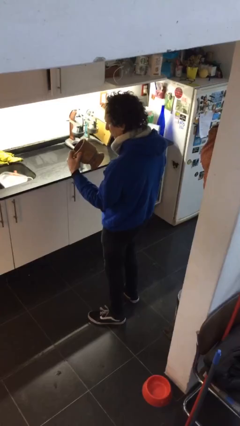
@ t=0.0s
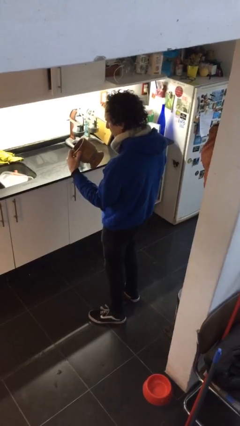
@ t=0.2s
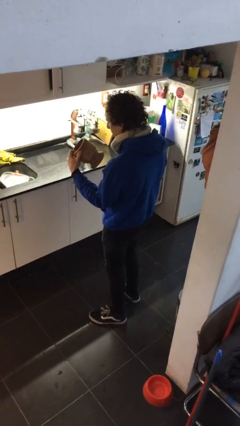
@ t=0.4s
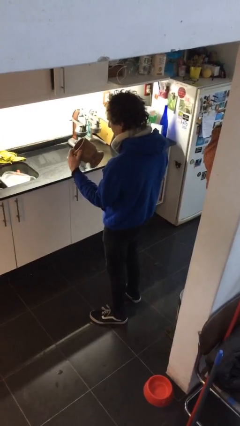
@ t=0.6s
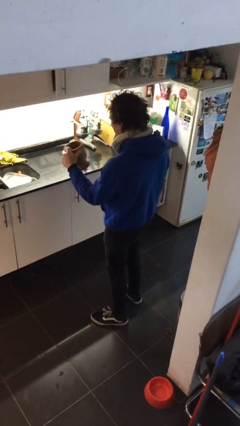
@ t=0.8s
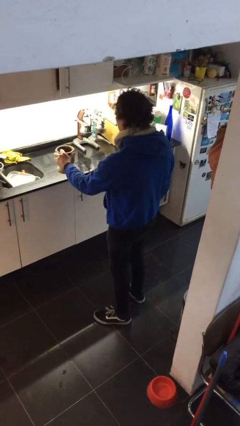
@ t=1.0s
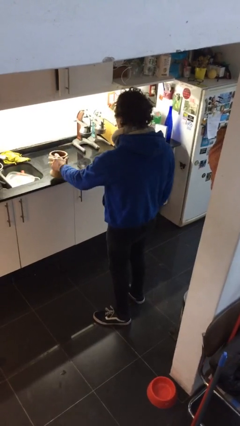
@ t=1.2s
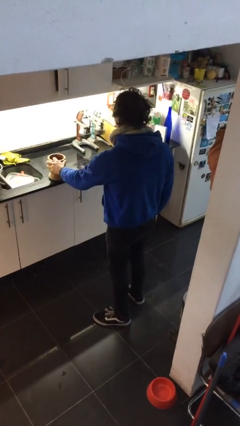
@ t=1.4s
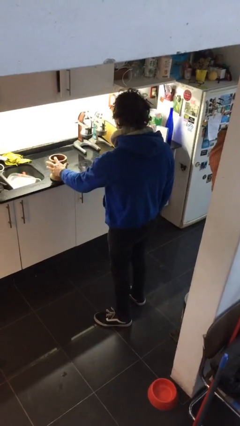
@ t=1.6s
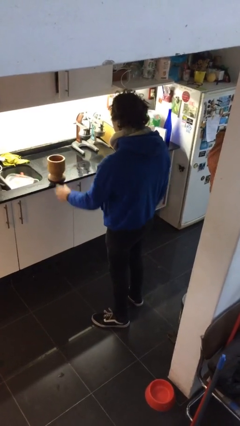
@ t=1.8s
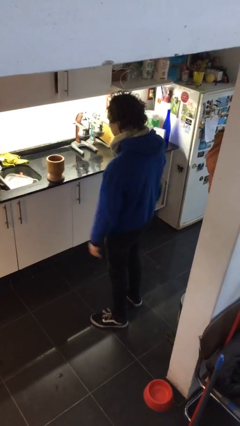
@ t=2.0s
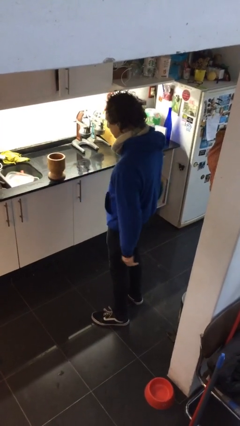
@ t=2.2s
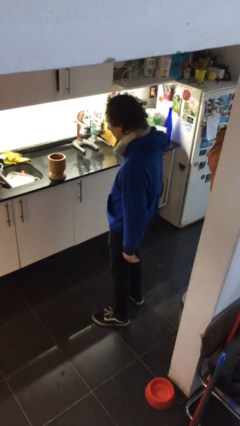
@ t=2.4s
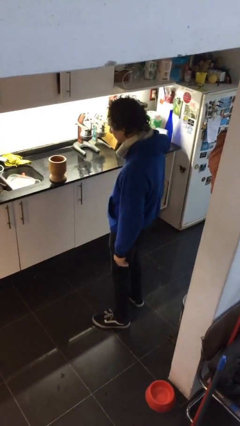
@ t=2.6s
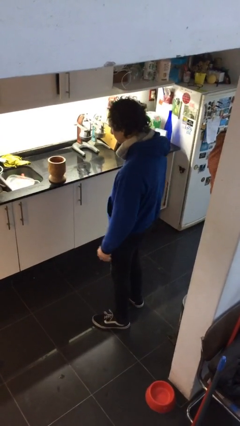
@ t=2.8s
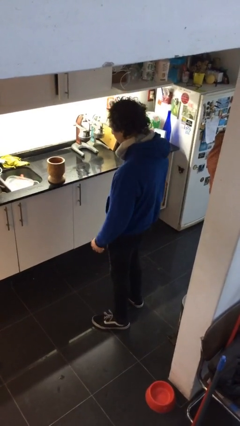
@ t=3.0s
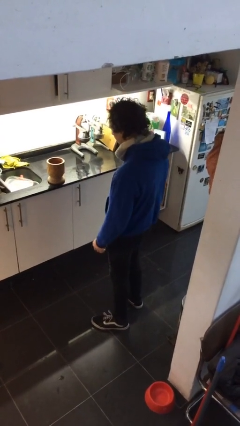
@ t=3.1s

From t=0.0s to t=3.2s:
person puts down object on countertop

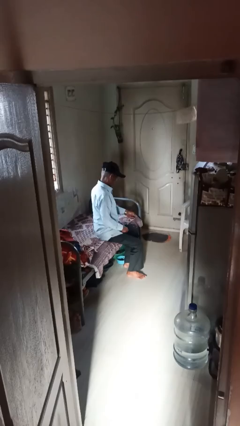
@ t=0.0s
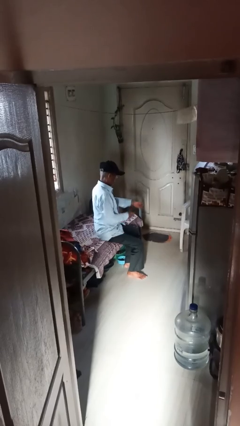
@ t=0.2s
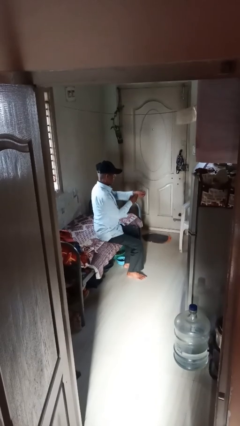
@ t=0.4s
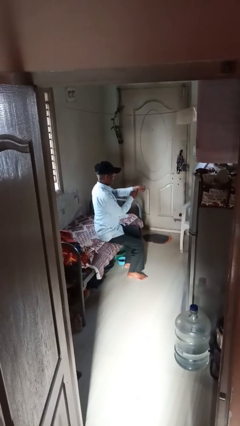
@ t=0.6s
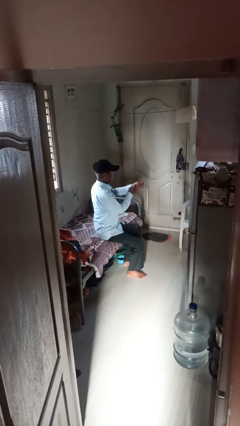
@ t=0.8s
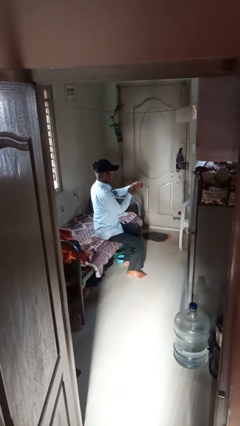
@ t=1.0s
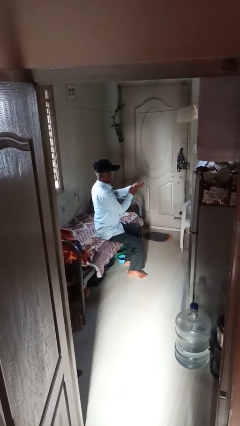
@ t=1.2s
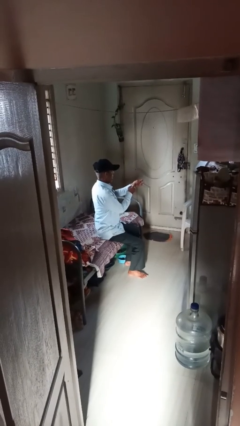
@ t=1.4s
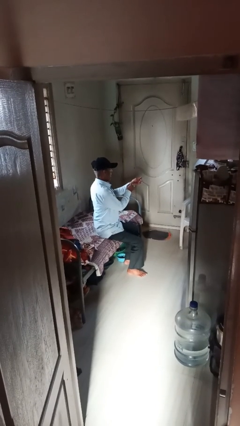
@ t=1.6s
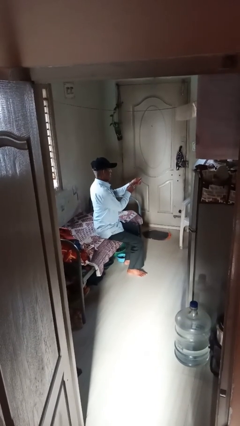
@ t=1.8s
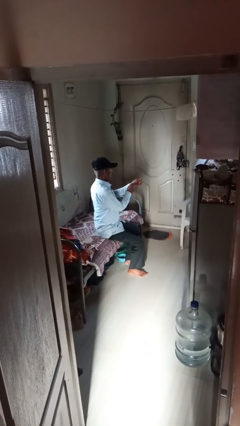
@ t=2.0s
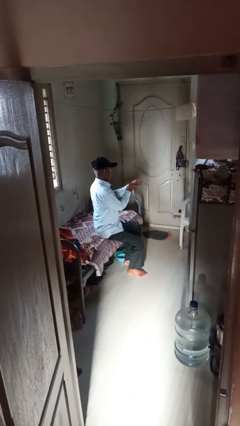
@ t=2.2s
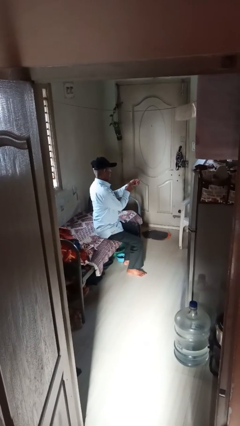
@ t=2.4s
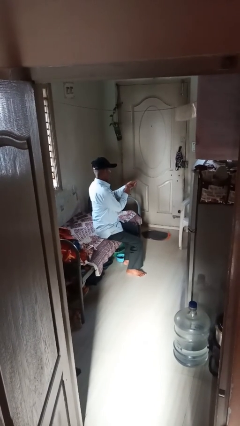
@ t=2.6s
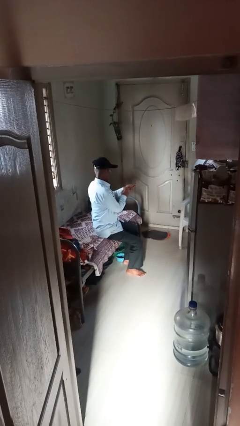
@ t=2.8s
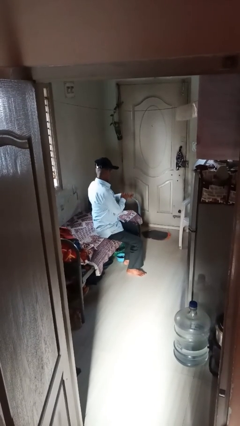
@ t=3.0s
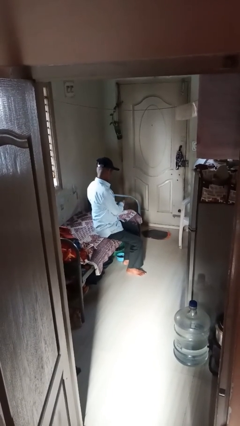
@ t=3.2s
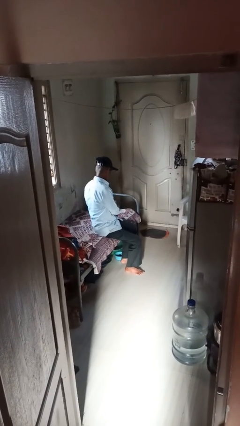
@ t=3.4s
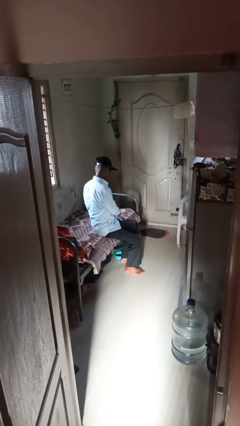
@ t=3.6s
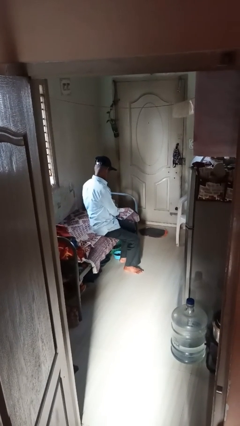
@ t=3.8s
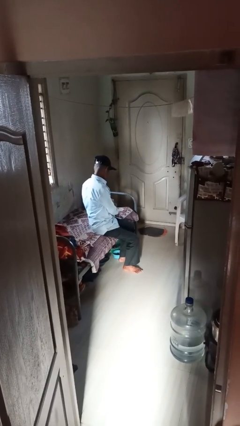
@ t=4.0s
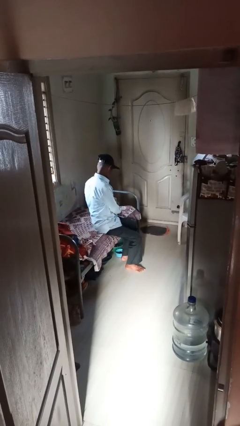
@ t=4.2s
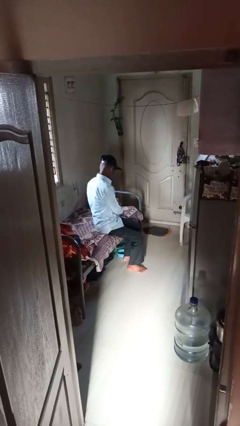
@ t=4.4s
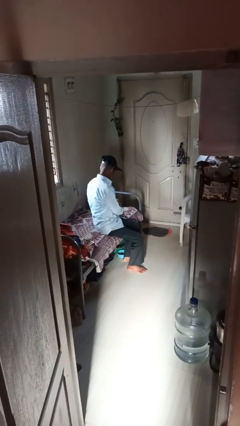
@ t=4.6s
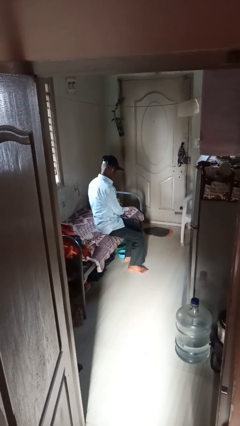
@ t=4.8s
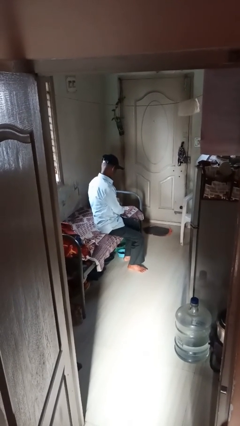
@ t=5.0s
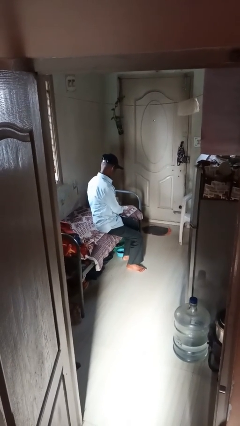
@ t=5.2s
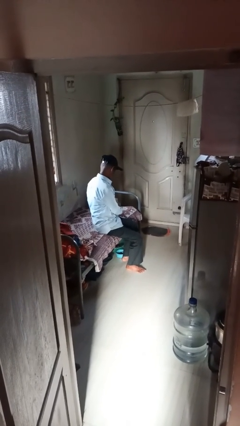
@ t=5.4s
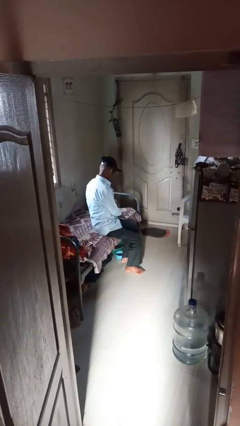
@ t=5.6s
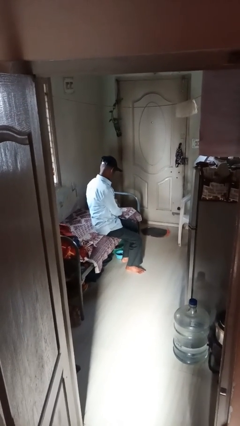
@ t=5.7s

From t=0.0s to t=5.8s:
person takes off wristwatch

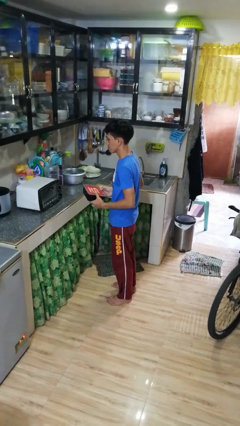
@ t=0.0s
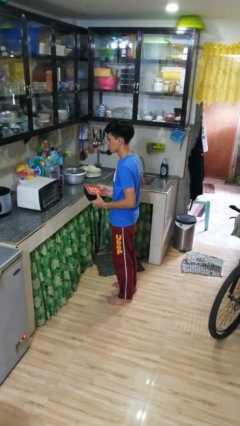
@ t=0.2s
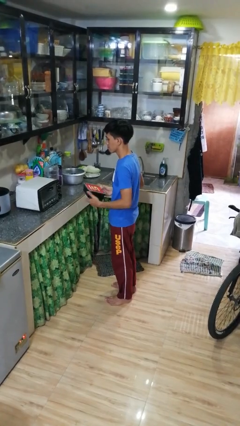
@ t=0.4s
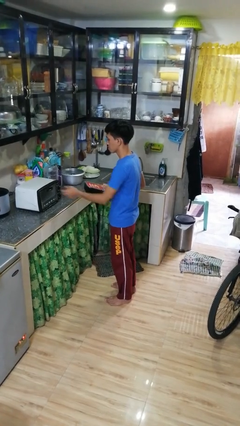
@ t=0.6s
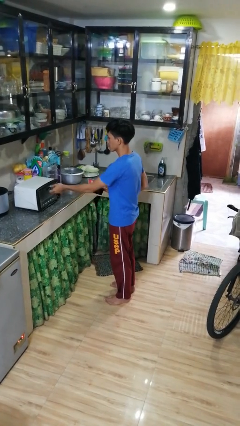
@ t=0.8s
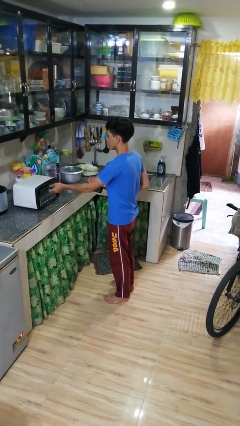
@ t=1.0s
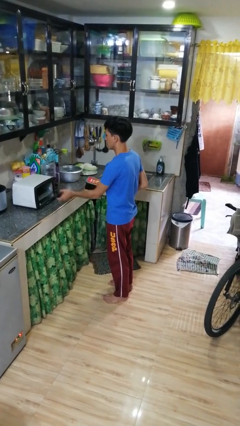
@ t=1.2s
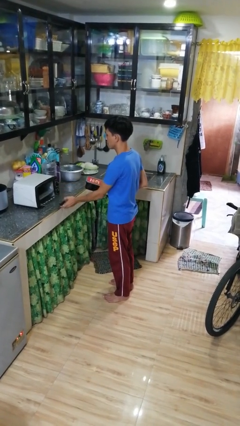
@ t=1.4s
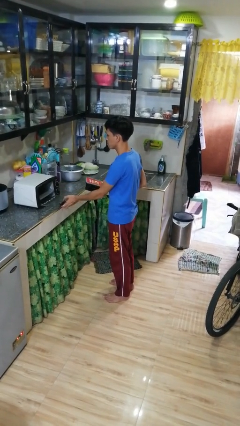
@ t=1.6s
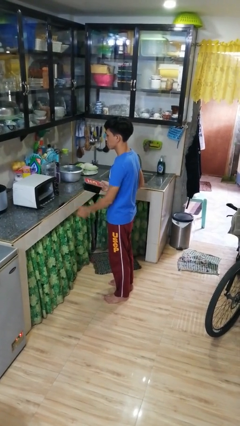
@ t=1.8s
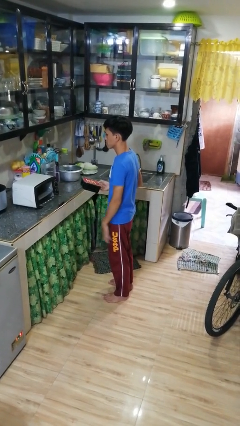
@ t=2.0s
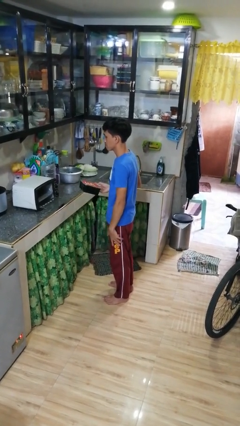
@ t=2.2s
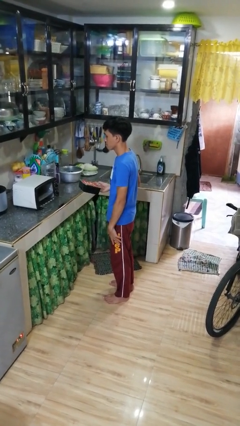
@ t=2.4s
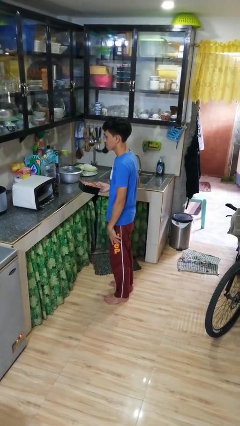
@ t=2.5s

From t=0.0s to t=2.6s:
person opens microwave

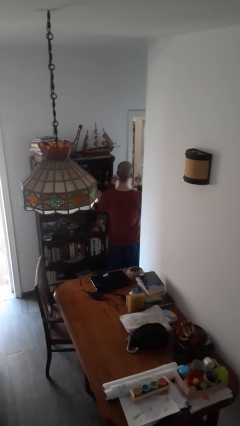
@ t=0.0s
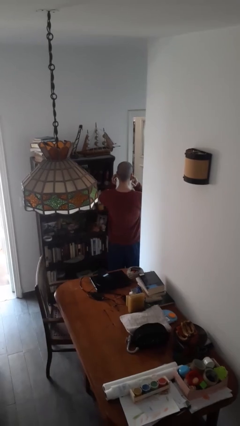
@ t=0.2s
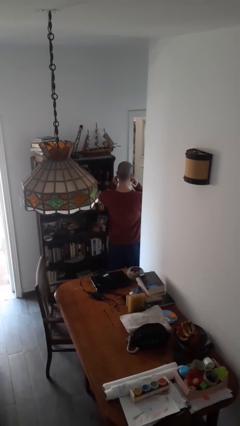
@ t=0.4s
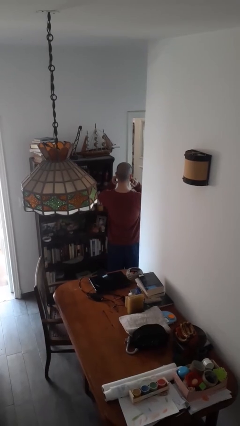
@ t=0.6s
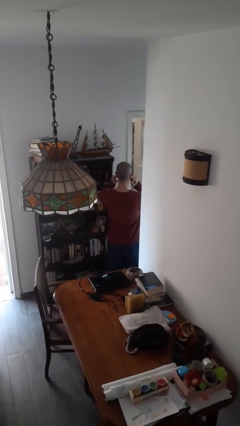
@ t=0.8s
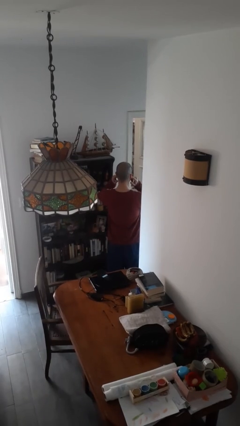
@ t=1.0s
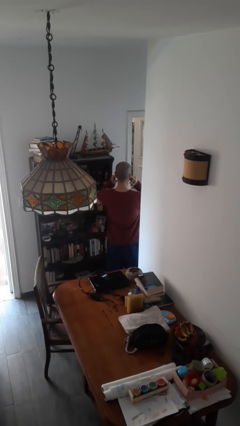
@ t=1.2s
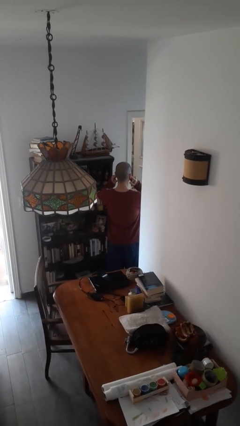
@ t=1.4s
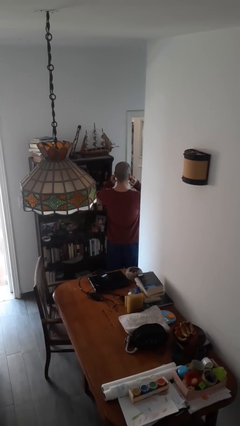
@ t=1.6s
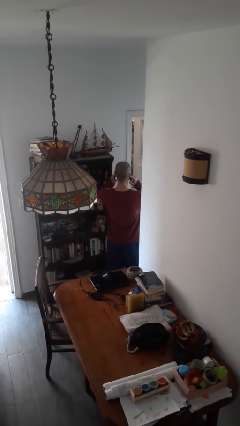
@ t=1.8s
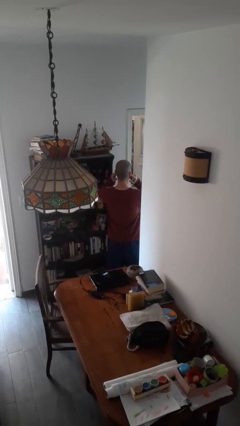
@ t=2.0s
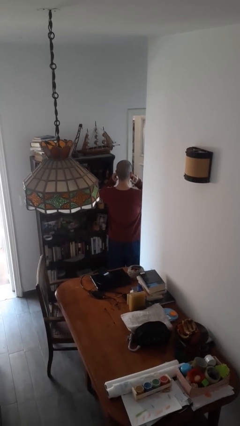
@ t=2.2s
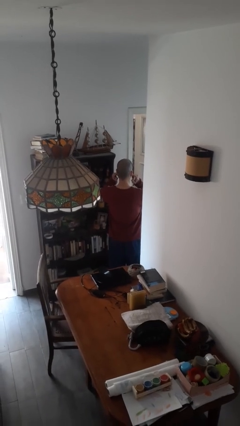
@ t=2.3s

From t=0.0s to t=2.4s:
person puts fingers in ear

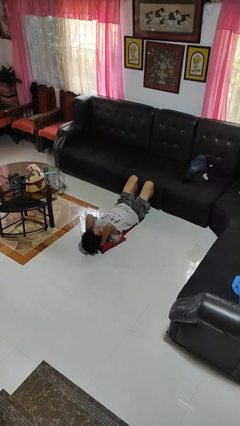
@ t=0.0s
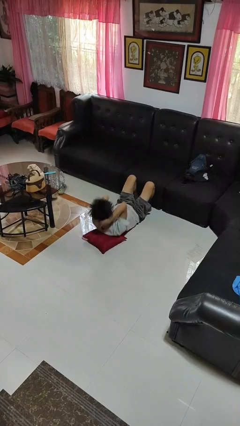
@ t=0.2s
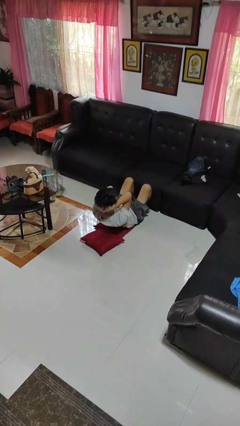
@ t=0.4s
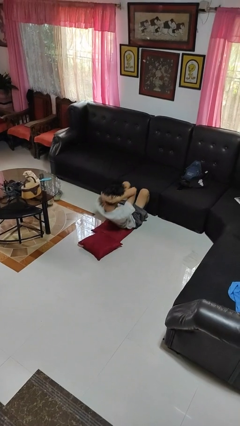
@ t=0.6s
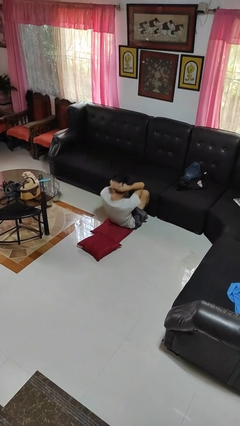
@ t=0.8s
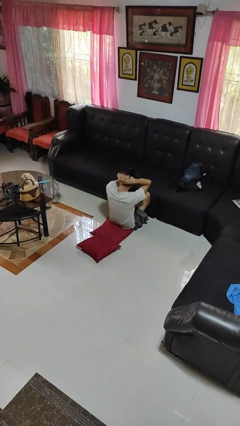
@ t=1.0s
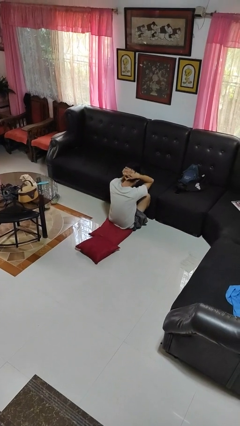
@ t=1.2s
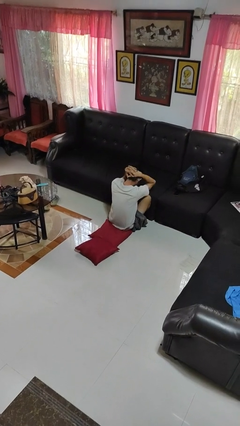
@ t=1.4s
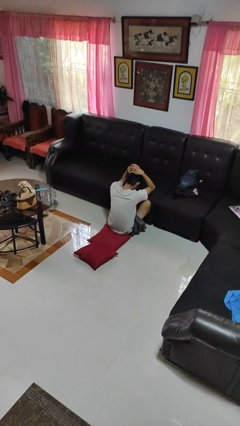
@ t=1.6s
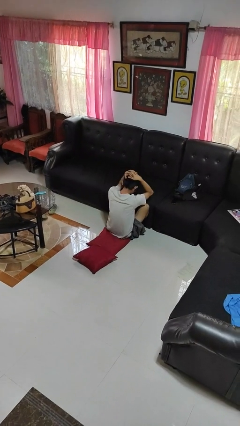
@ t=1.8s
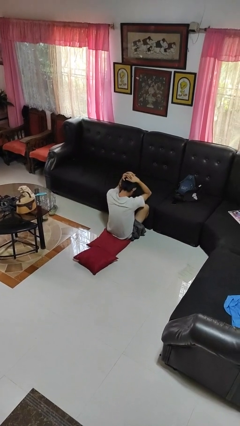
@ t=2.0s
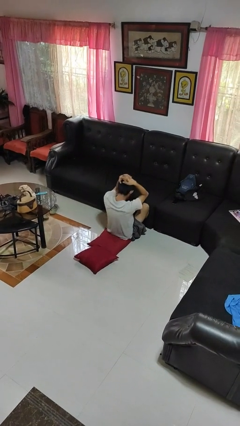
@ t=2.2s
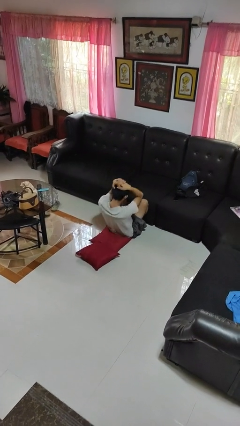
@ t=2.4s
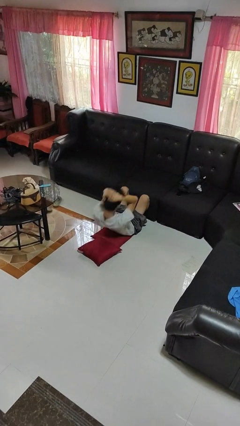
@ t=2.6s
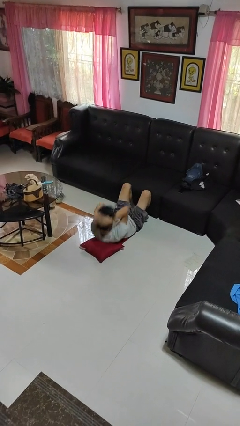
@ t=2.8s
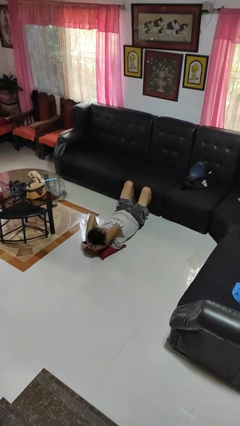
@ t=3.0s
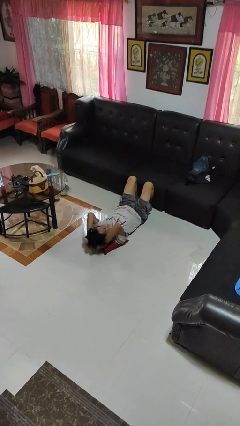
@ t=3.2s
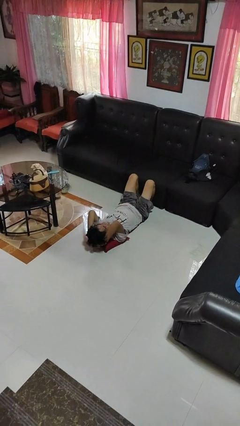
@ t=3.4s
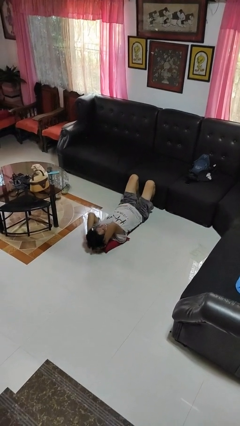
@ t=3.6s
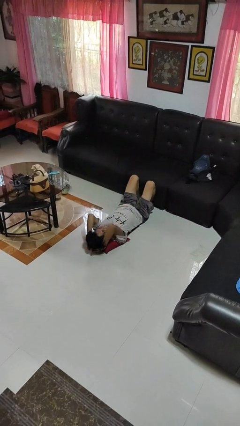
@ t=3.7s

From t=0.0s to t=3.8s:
person exercises with situp
